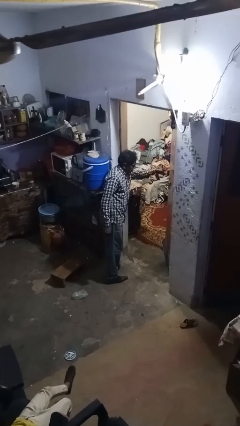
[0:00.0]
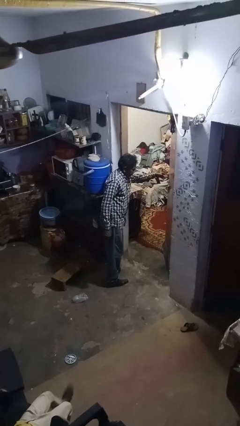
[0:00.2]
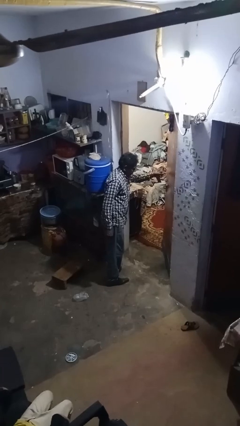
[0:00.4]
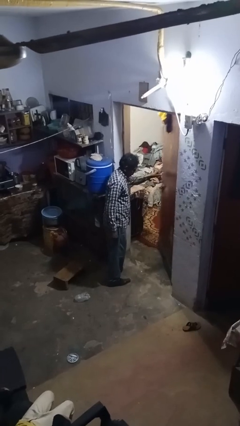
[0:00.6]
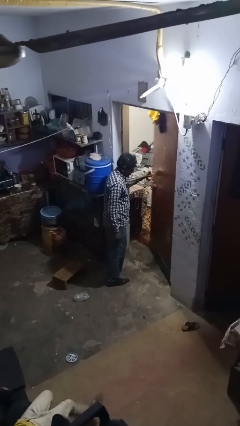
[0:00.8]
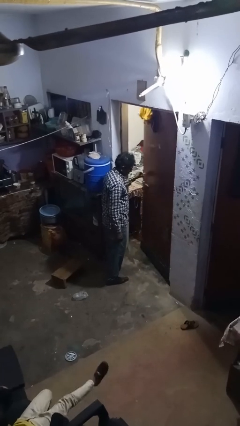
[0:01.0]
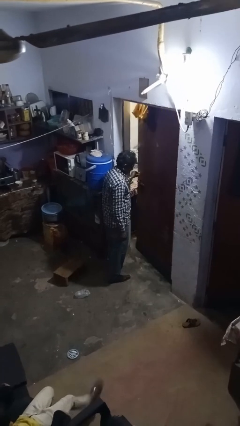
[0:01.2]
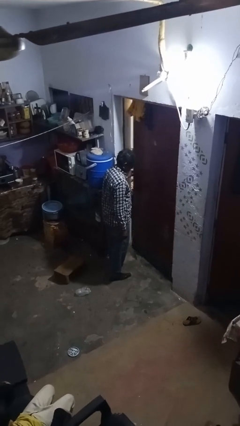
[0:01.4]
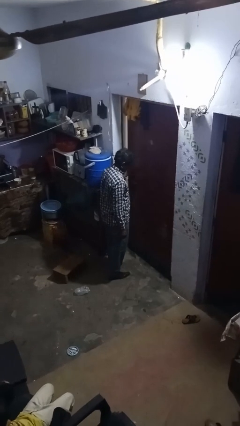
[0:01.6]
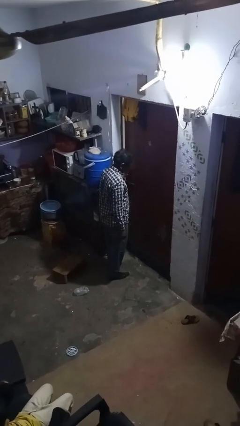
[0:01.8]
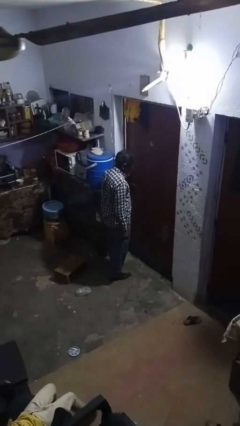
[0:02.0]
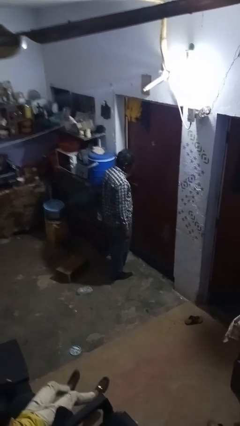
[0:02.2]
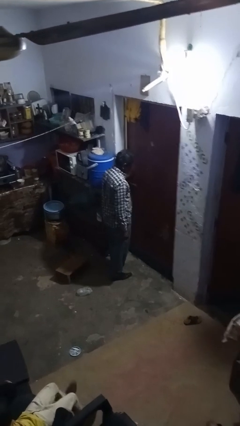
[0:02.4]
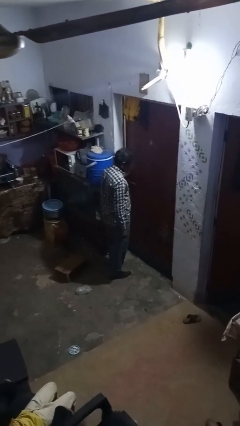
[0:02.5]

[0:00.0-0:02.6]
person closes facility door

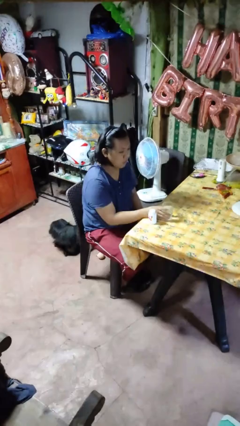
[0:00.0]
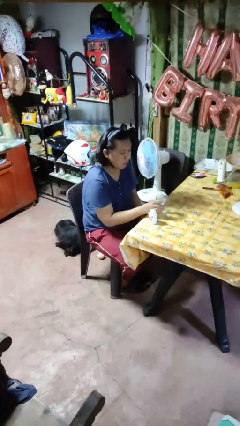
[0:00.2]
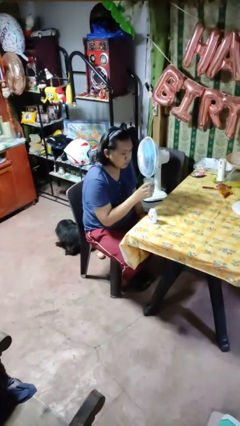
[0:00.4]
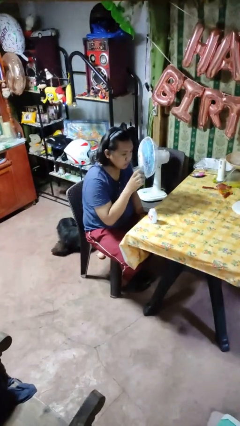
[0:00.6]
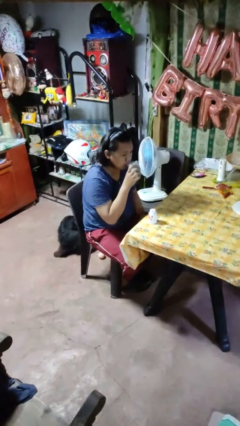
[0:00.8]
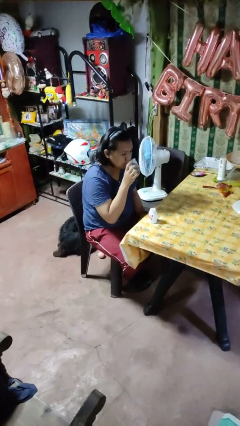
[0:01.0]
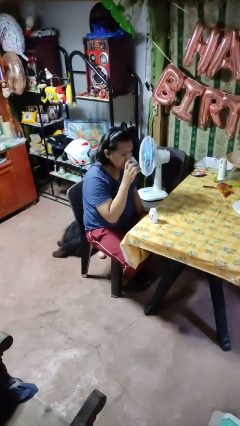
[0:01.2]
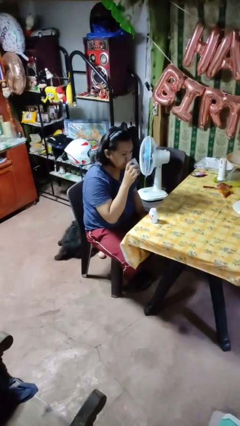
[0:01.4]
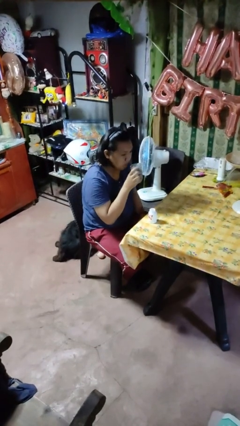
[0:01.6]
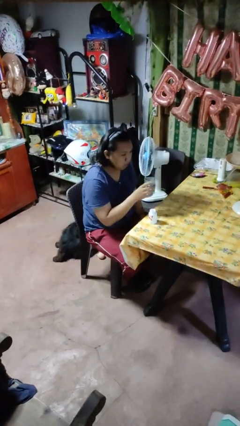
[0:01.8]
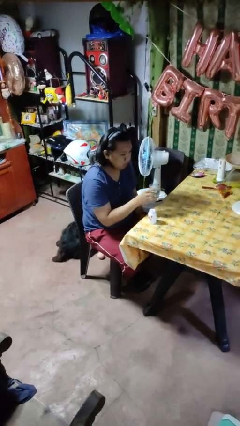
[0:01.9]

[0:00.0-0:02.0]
person drinks from cup

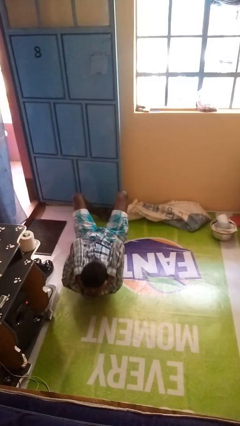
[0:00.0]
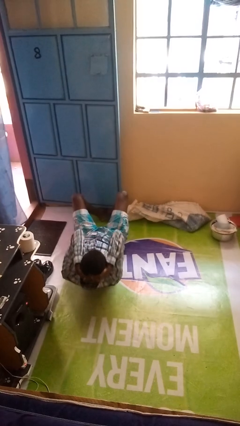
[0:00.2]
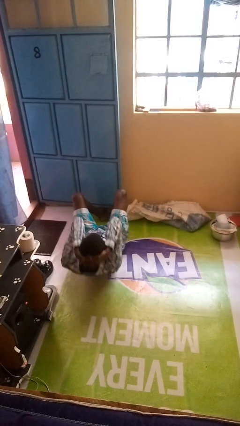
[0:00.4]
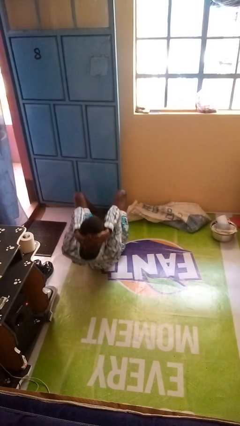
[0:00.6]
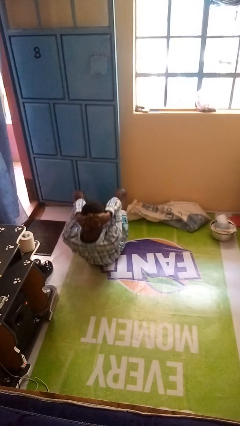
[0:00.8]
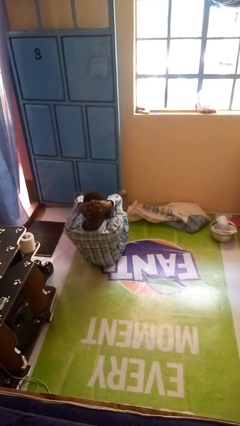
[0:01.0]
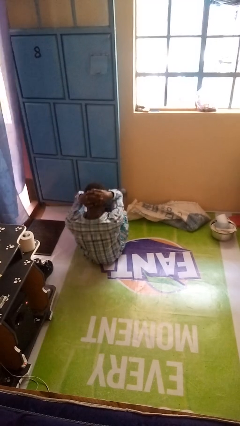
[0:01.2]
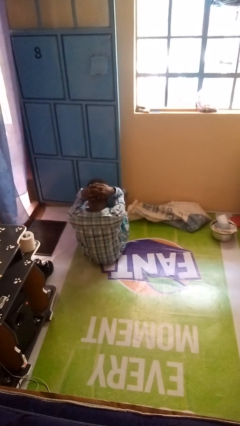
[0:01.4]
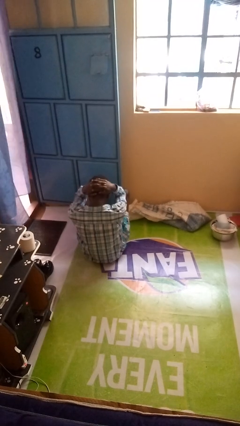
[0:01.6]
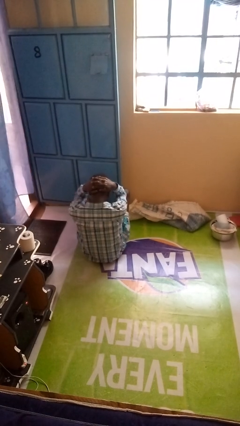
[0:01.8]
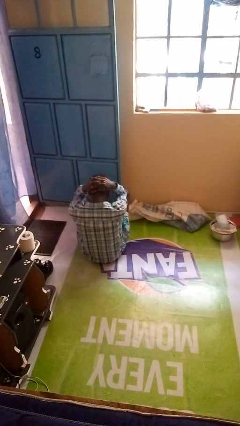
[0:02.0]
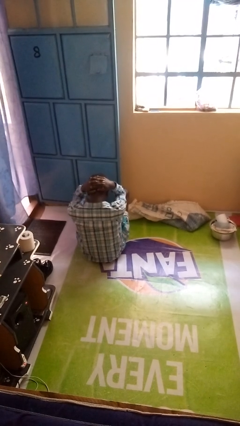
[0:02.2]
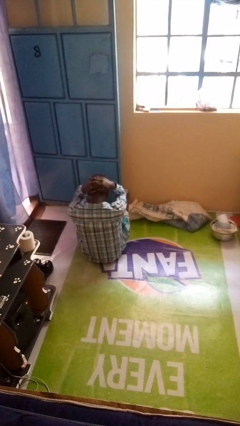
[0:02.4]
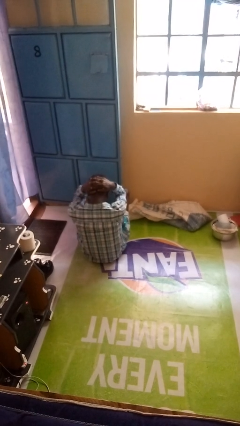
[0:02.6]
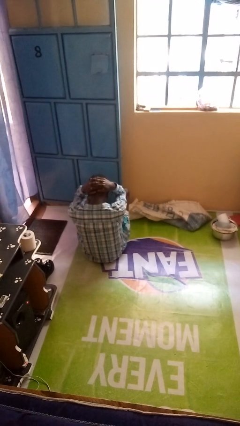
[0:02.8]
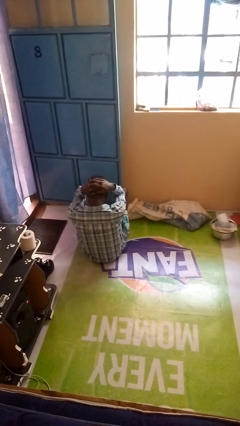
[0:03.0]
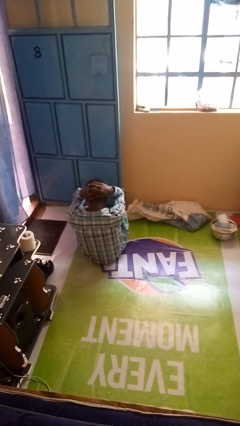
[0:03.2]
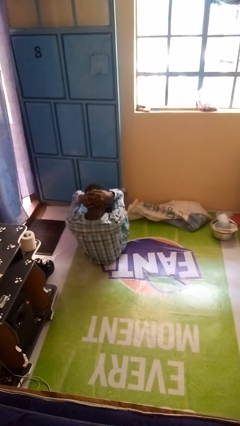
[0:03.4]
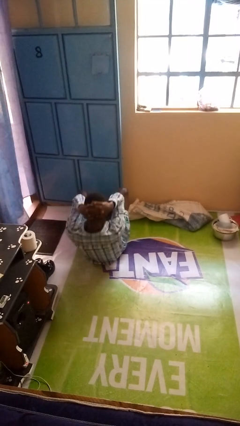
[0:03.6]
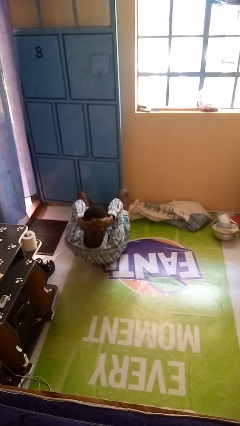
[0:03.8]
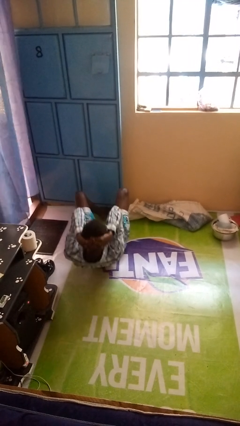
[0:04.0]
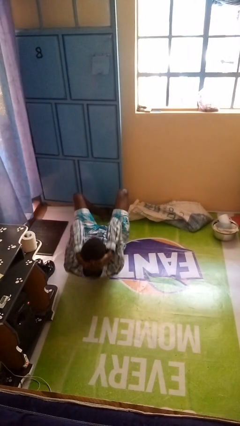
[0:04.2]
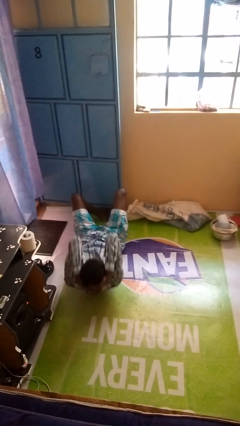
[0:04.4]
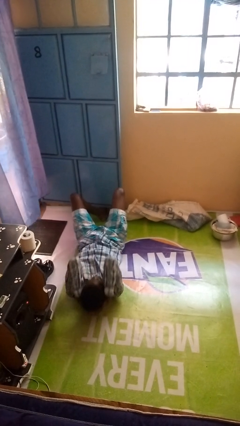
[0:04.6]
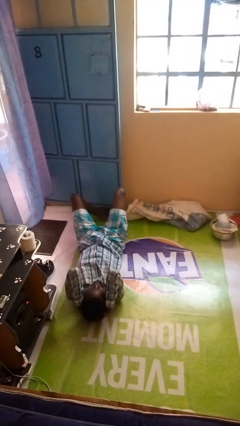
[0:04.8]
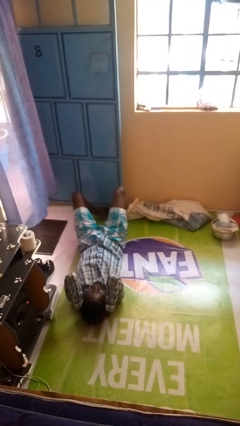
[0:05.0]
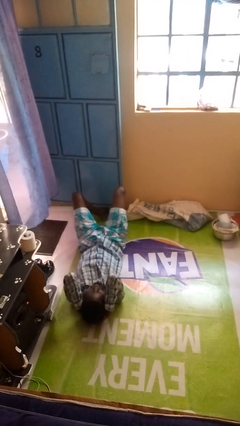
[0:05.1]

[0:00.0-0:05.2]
person exercises with situp

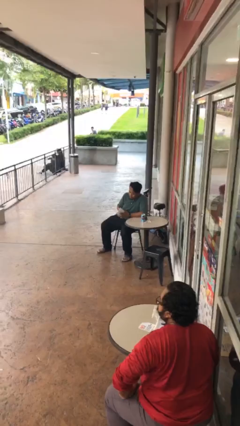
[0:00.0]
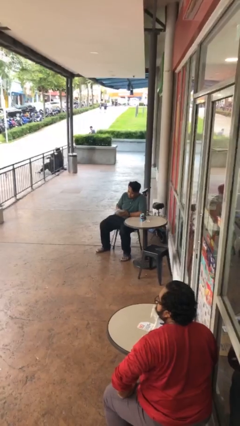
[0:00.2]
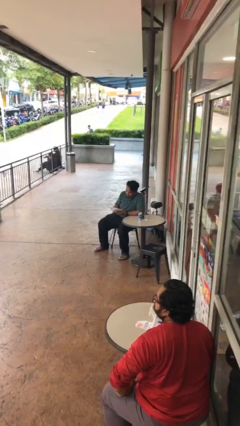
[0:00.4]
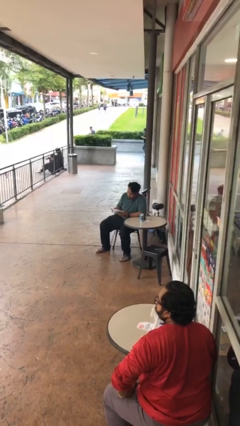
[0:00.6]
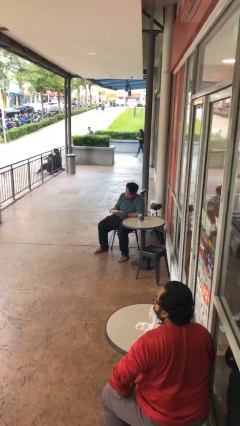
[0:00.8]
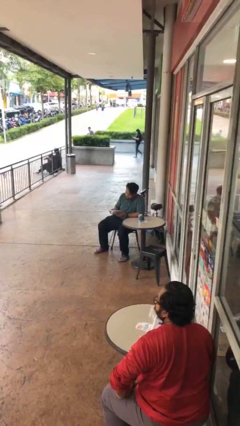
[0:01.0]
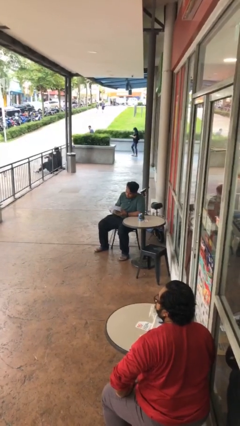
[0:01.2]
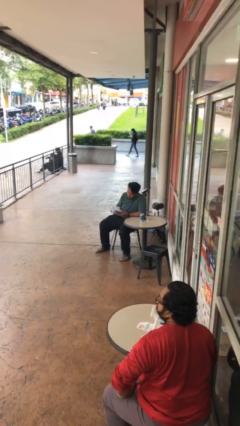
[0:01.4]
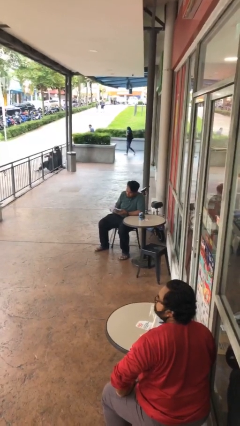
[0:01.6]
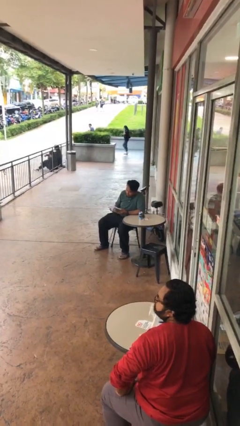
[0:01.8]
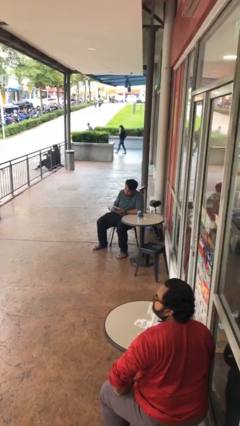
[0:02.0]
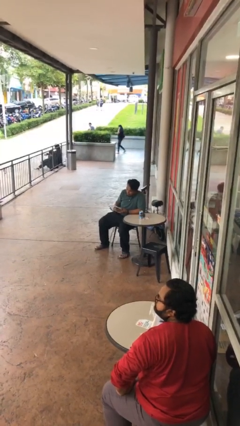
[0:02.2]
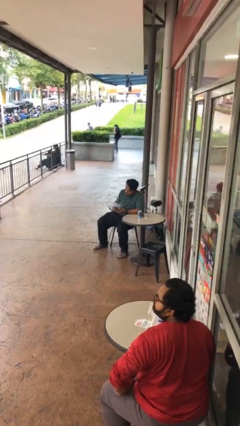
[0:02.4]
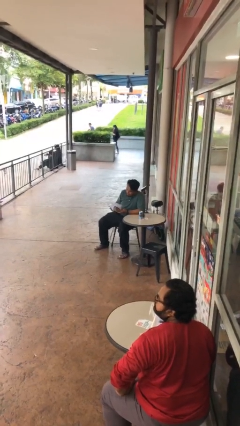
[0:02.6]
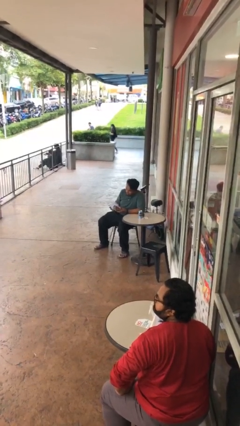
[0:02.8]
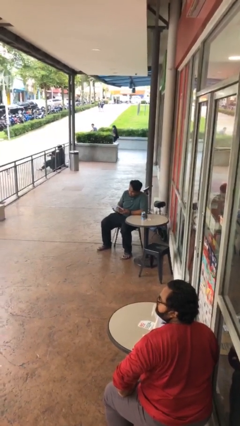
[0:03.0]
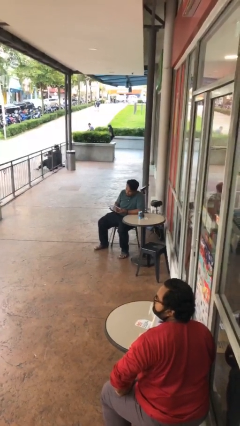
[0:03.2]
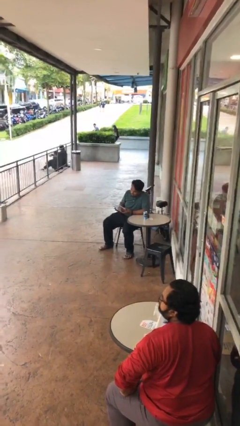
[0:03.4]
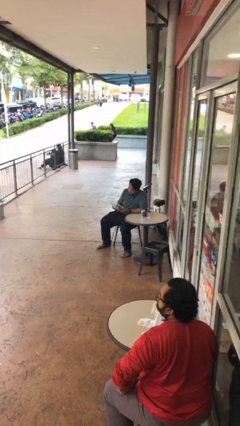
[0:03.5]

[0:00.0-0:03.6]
person reads document

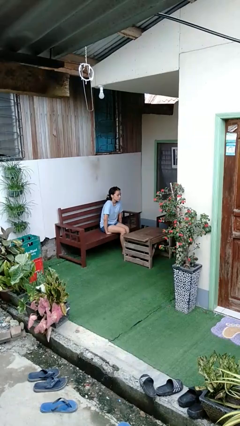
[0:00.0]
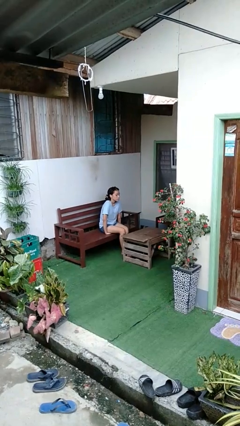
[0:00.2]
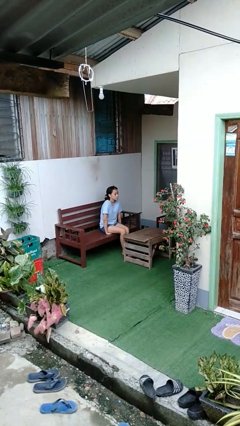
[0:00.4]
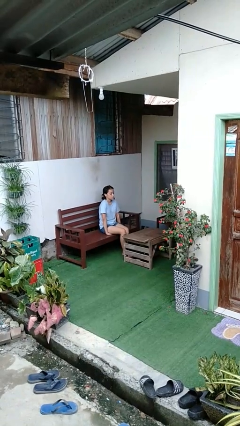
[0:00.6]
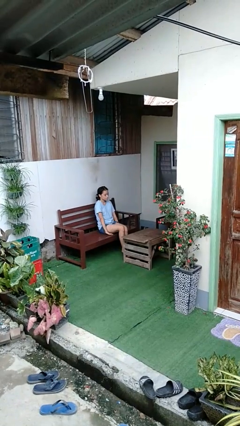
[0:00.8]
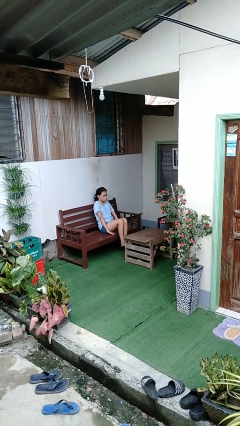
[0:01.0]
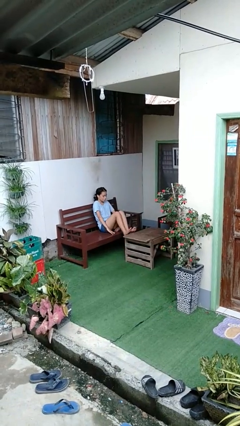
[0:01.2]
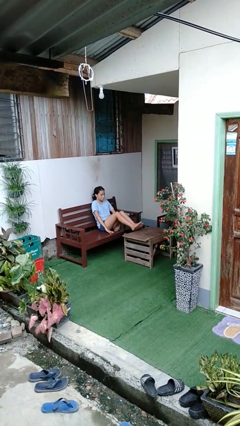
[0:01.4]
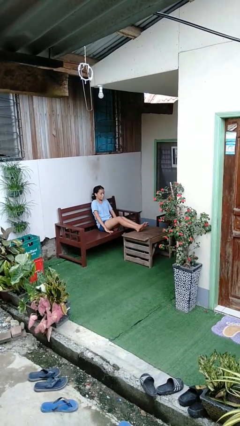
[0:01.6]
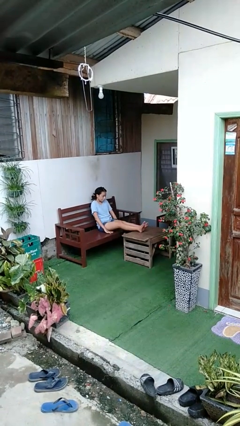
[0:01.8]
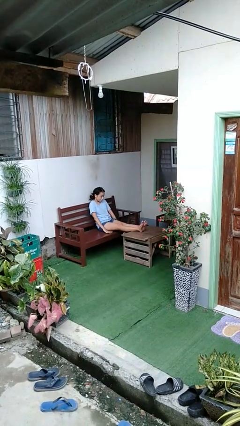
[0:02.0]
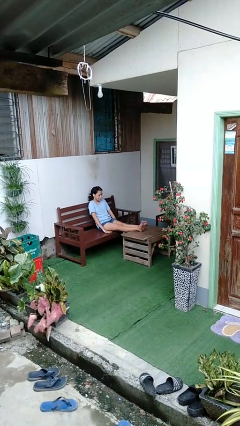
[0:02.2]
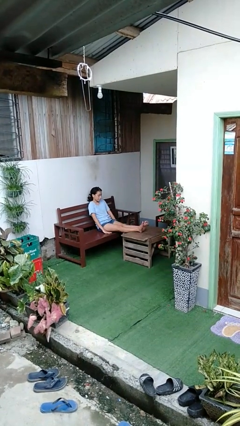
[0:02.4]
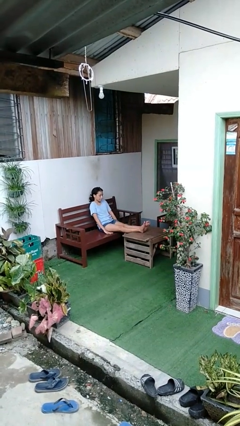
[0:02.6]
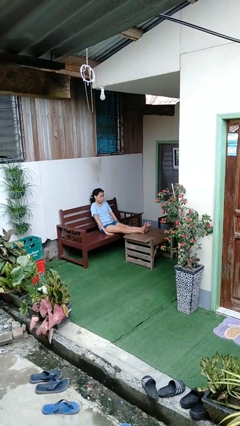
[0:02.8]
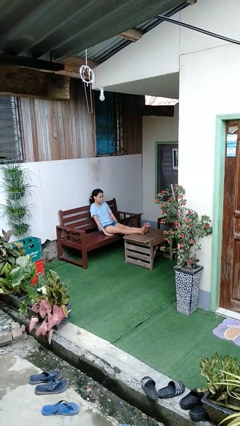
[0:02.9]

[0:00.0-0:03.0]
person puts feet up

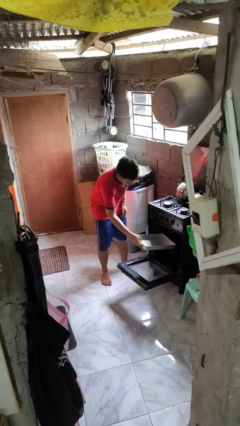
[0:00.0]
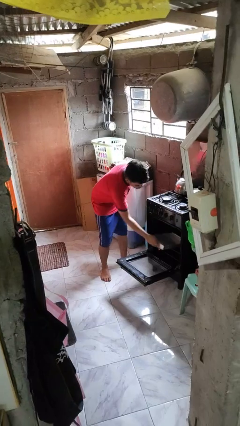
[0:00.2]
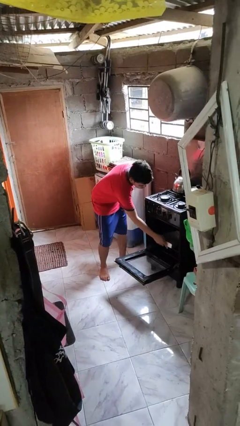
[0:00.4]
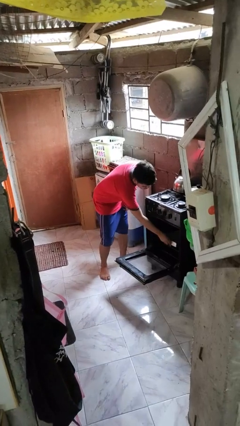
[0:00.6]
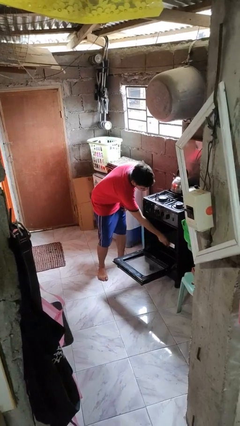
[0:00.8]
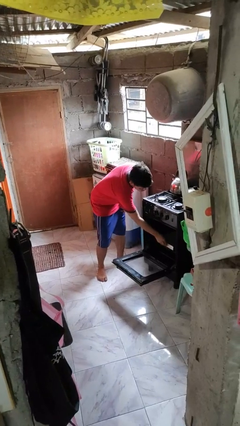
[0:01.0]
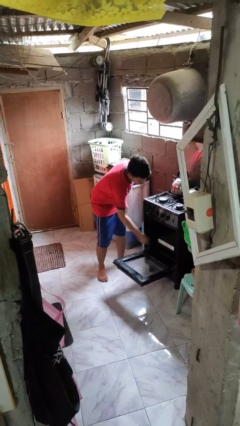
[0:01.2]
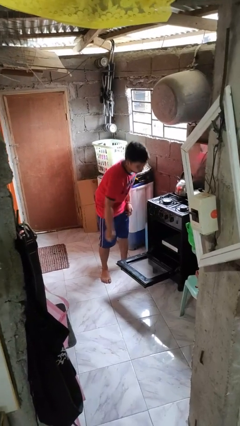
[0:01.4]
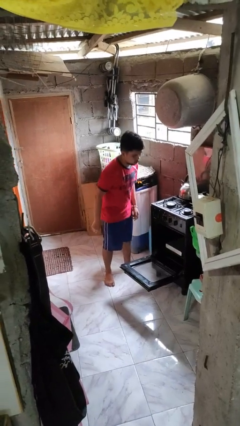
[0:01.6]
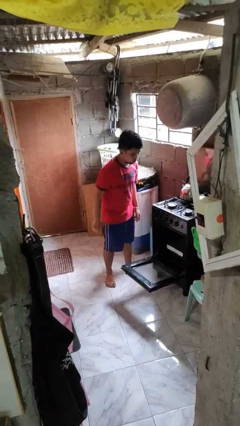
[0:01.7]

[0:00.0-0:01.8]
person puts object into oven
